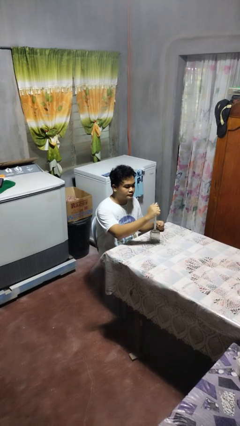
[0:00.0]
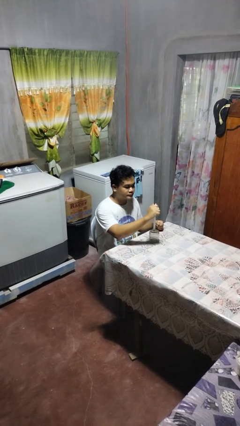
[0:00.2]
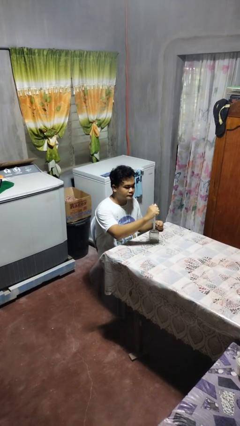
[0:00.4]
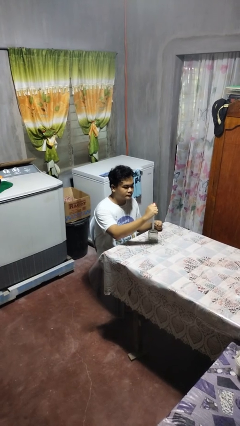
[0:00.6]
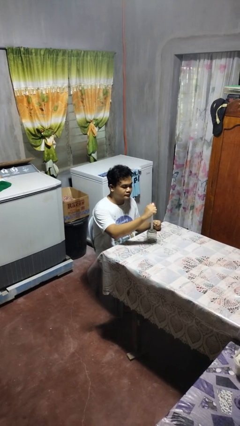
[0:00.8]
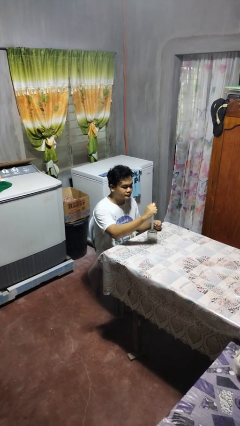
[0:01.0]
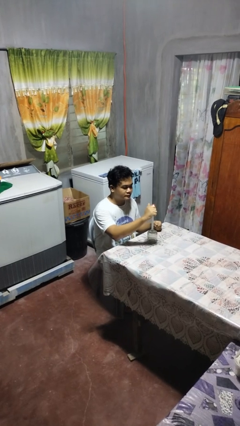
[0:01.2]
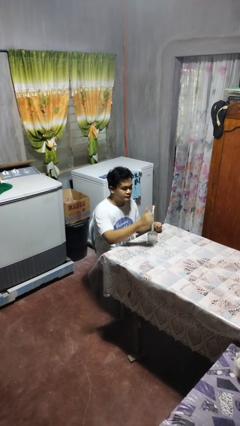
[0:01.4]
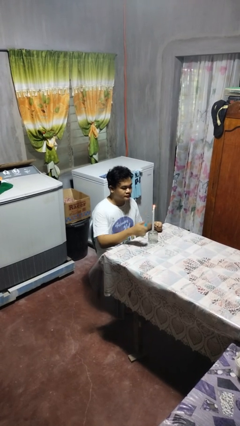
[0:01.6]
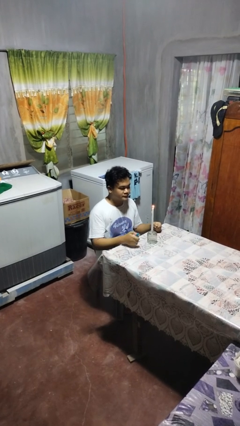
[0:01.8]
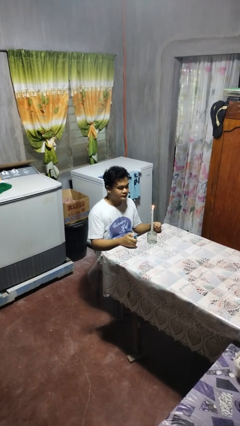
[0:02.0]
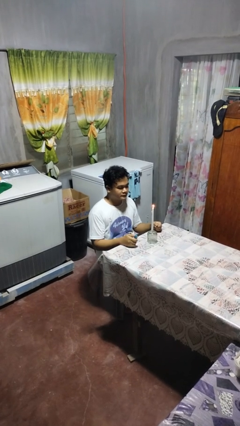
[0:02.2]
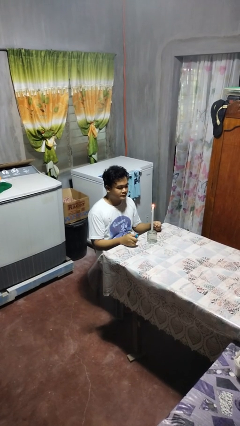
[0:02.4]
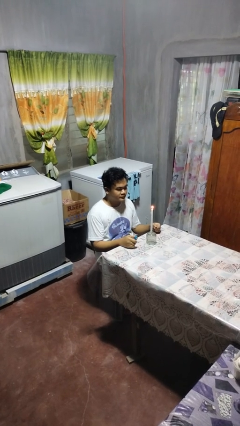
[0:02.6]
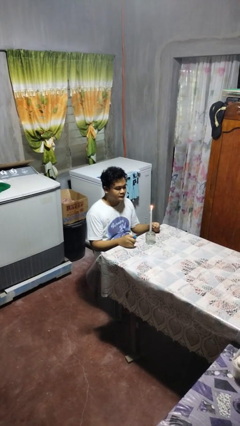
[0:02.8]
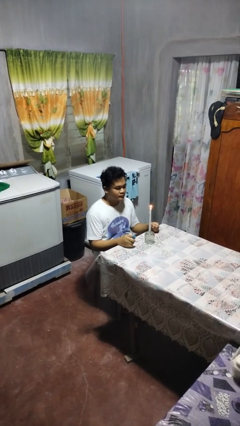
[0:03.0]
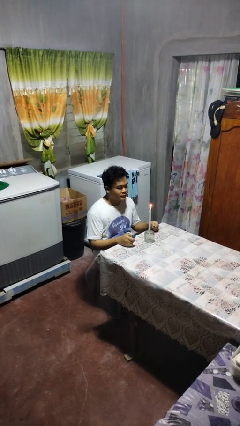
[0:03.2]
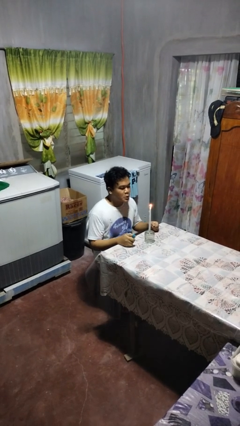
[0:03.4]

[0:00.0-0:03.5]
person lights candle

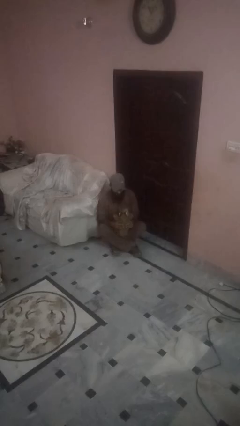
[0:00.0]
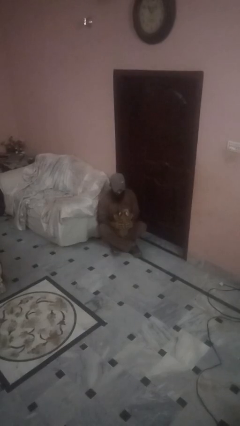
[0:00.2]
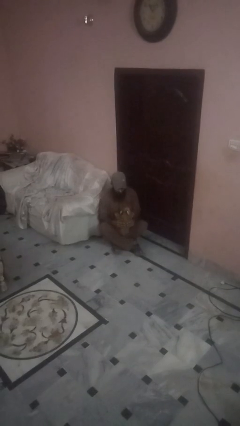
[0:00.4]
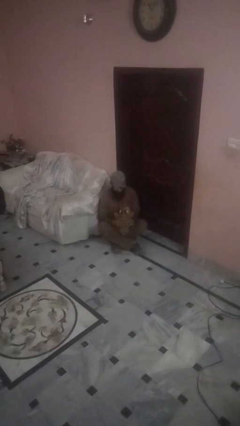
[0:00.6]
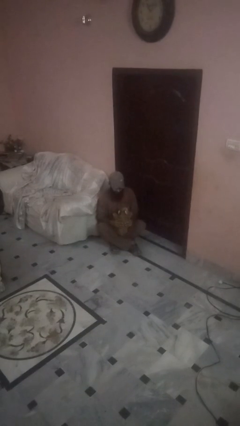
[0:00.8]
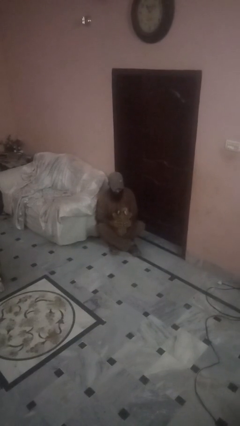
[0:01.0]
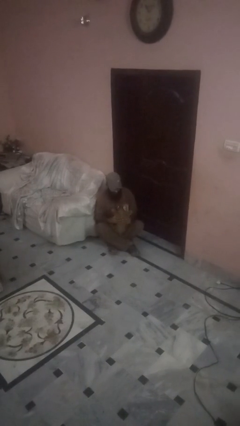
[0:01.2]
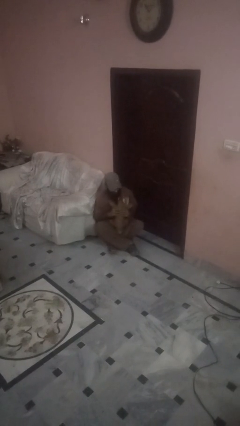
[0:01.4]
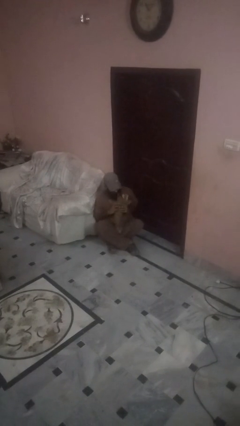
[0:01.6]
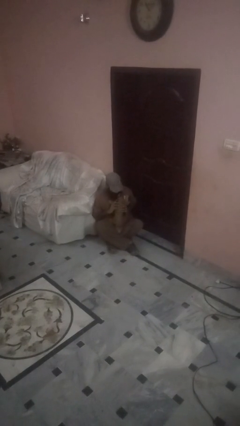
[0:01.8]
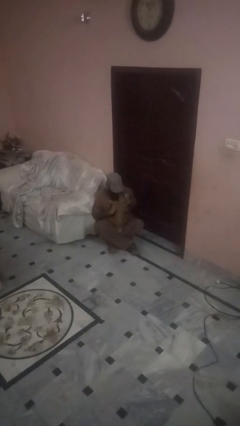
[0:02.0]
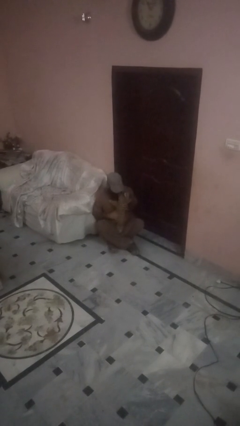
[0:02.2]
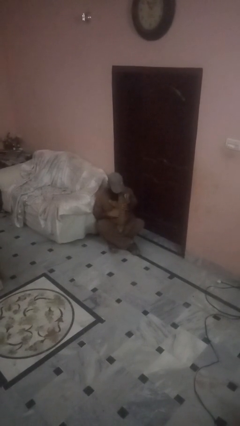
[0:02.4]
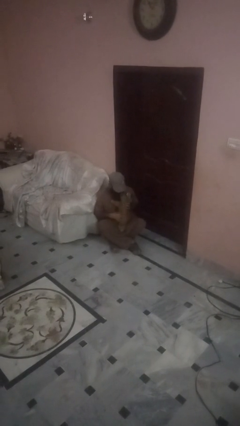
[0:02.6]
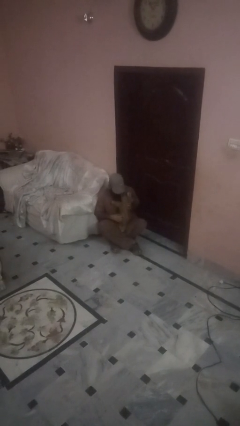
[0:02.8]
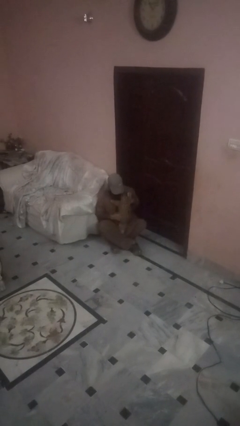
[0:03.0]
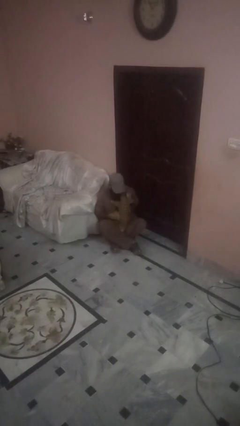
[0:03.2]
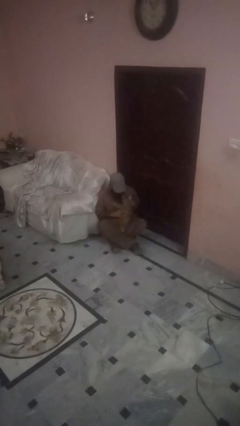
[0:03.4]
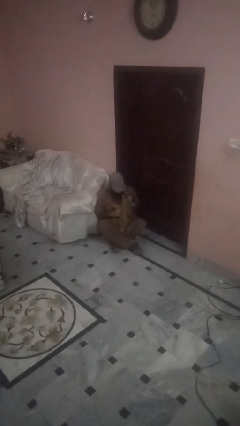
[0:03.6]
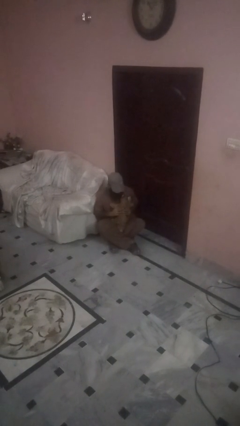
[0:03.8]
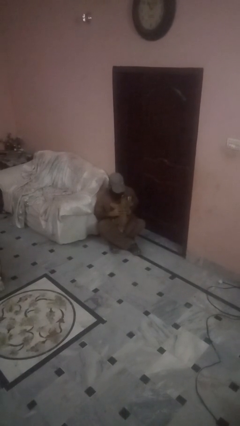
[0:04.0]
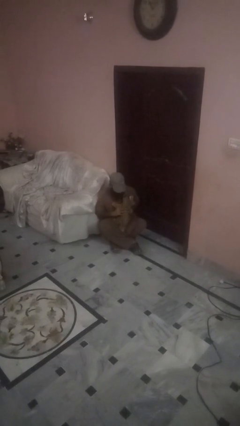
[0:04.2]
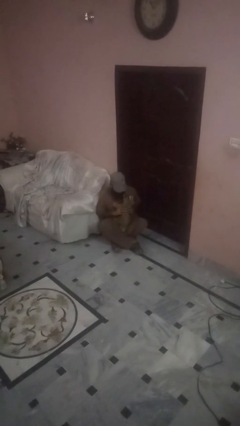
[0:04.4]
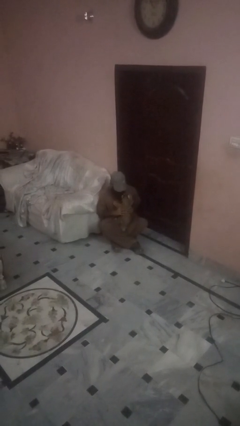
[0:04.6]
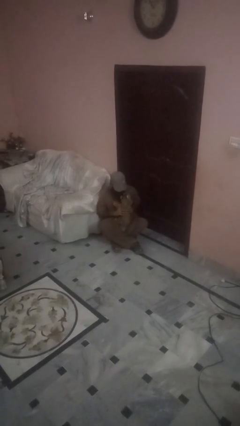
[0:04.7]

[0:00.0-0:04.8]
person hugs dog

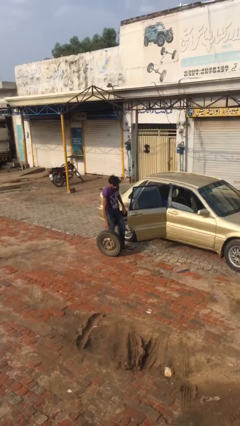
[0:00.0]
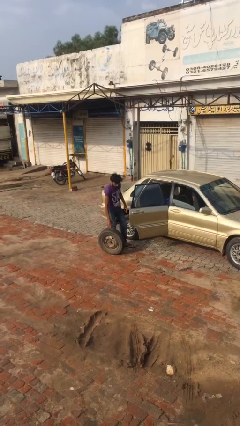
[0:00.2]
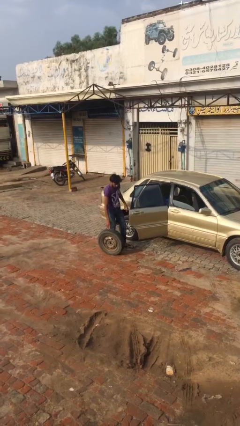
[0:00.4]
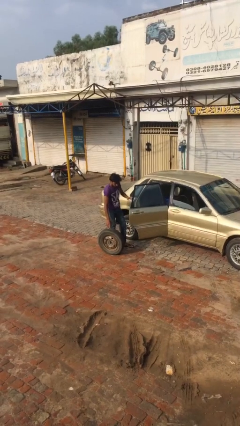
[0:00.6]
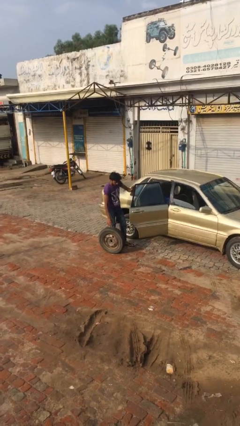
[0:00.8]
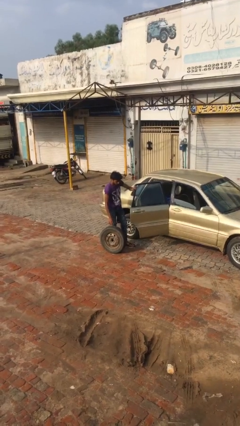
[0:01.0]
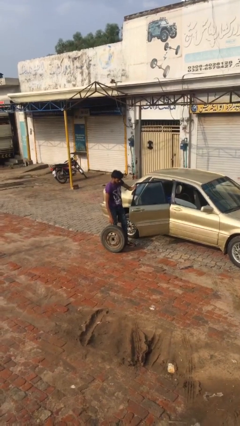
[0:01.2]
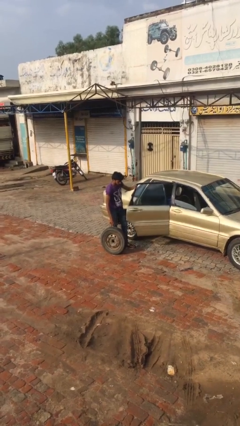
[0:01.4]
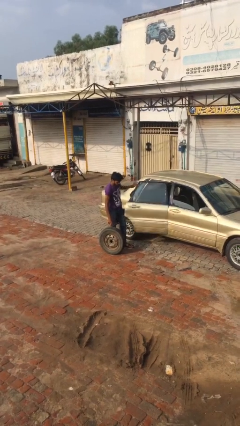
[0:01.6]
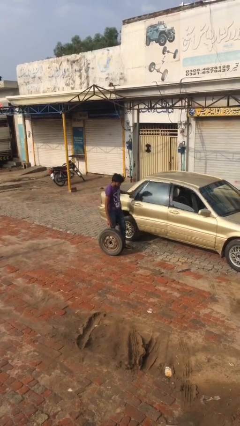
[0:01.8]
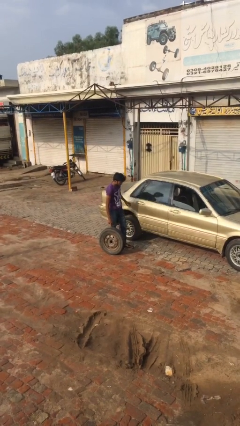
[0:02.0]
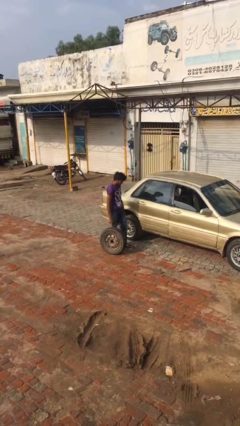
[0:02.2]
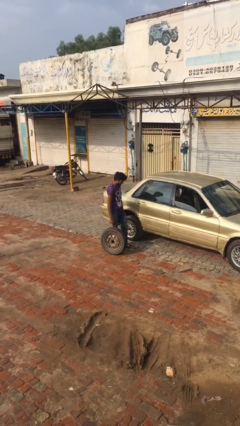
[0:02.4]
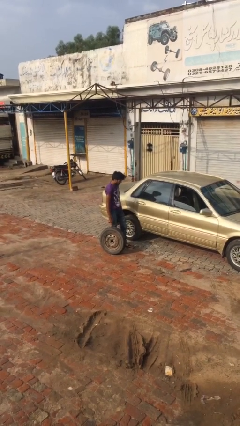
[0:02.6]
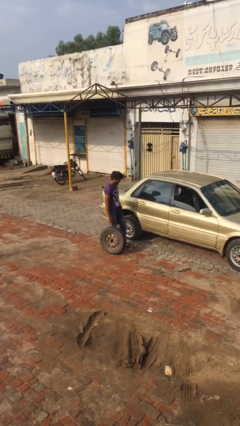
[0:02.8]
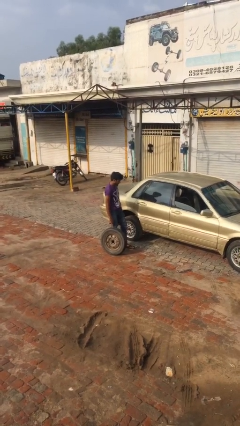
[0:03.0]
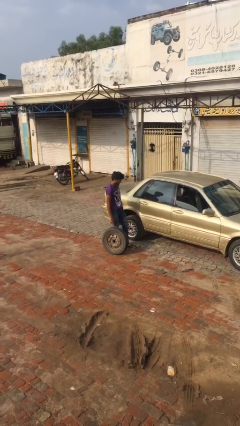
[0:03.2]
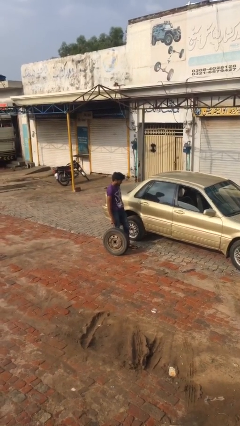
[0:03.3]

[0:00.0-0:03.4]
person closes car door

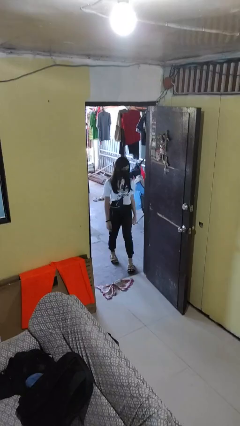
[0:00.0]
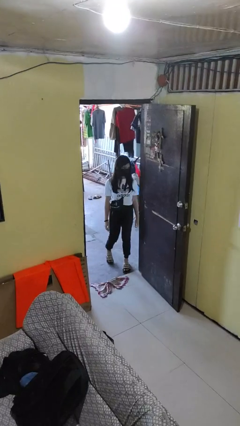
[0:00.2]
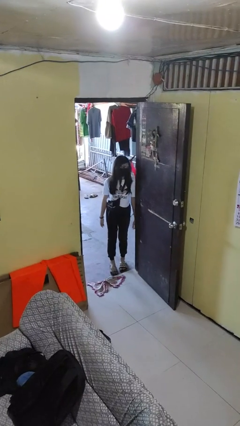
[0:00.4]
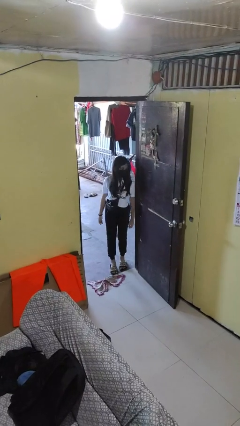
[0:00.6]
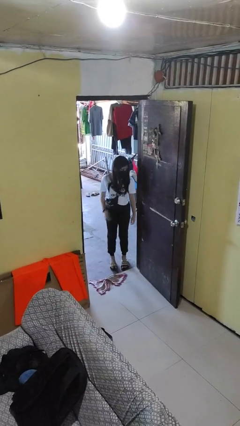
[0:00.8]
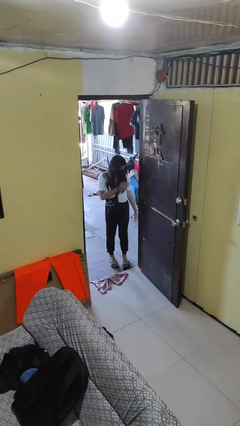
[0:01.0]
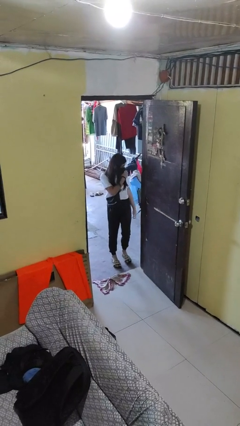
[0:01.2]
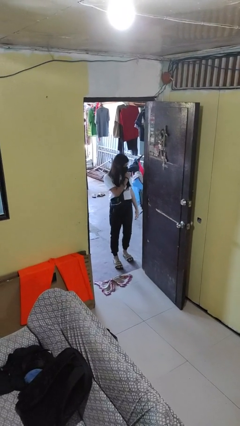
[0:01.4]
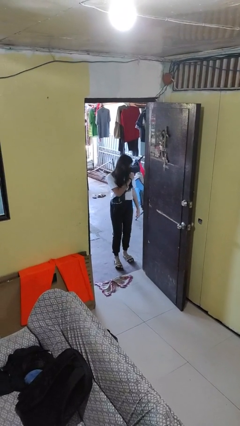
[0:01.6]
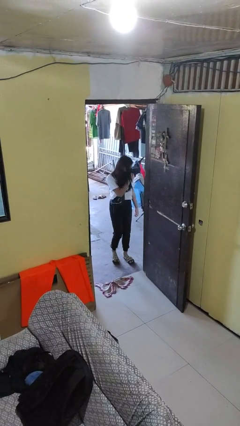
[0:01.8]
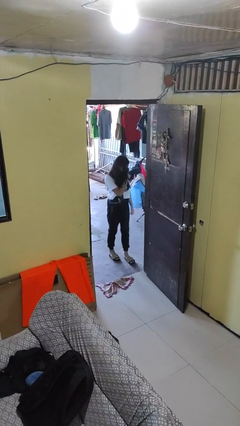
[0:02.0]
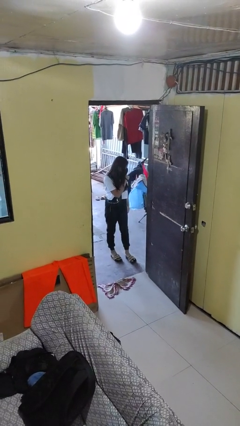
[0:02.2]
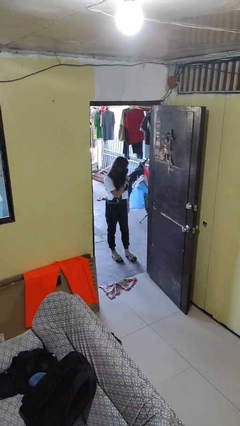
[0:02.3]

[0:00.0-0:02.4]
person bumps into wall

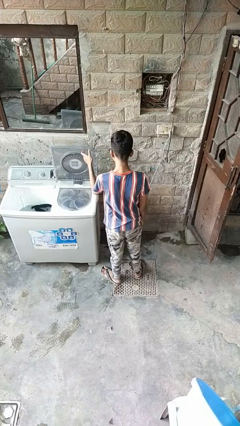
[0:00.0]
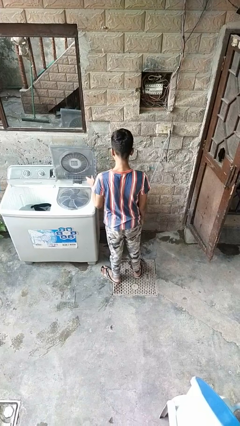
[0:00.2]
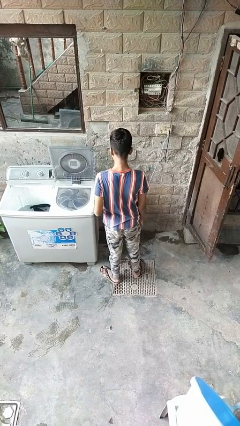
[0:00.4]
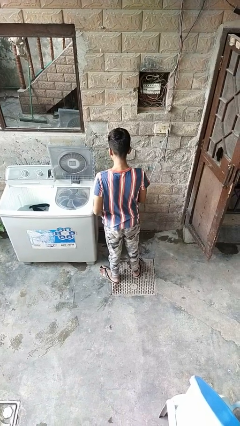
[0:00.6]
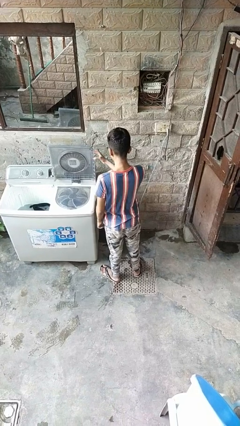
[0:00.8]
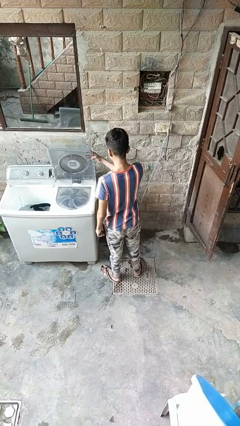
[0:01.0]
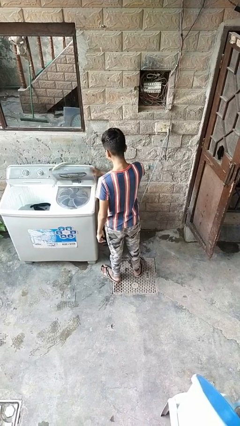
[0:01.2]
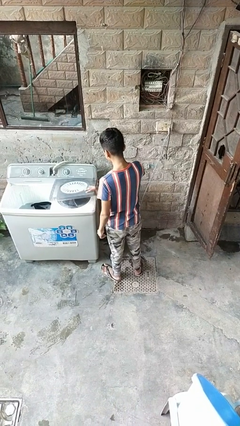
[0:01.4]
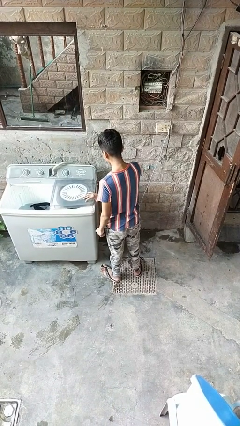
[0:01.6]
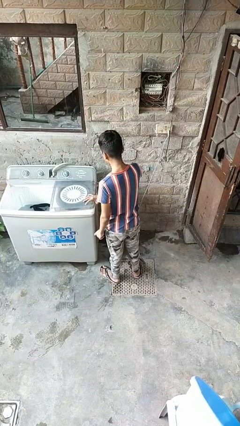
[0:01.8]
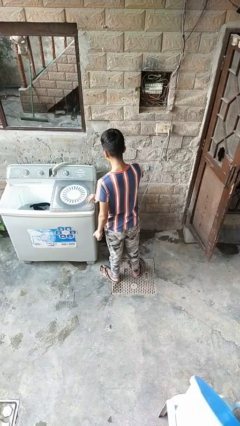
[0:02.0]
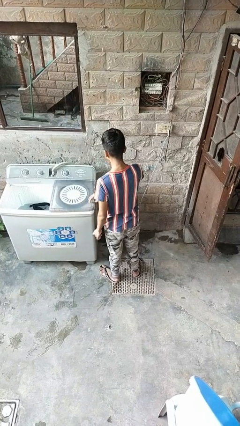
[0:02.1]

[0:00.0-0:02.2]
person turns off faucet

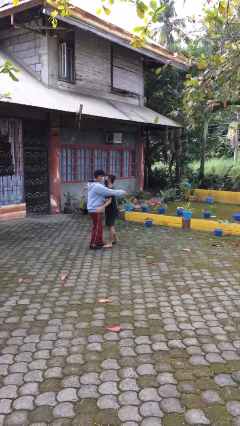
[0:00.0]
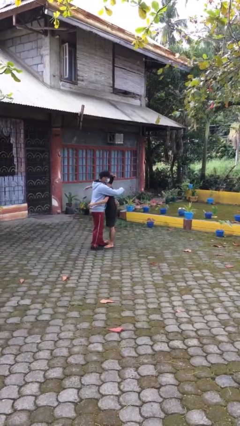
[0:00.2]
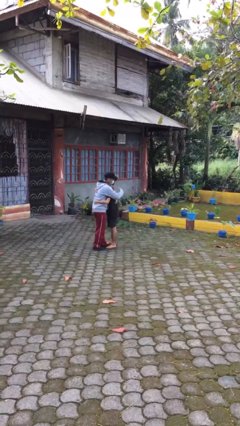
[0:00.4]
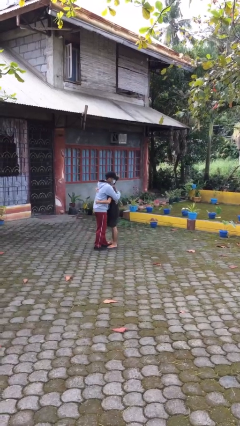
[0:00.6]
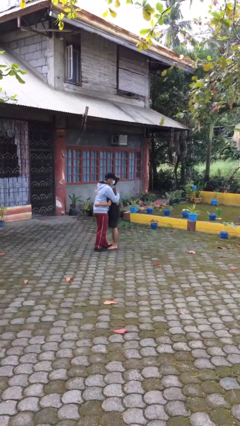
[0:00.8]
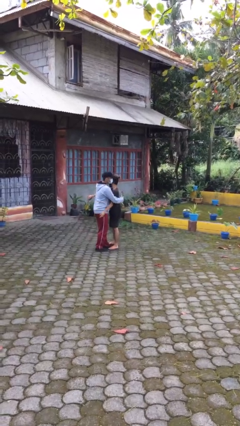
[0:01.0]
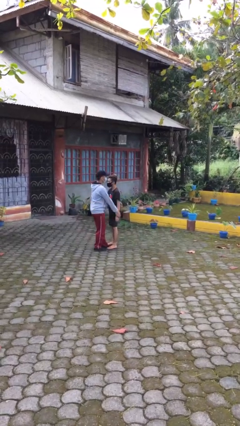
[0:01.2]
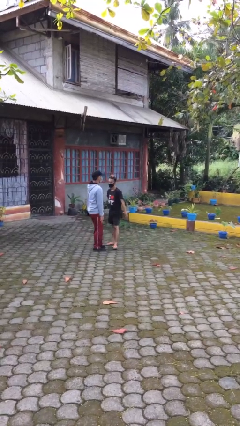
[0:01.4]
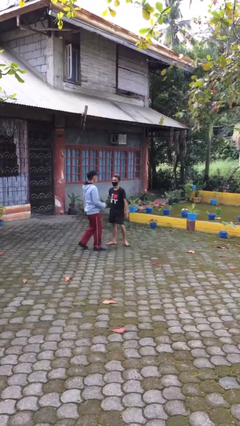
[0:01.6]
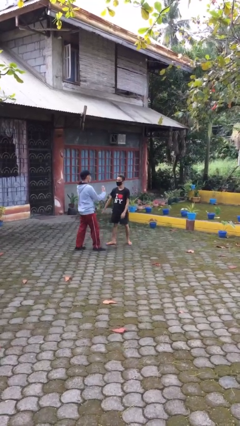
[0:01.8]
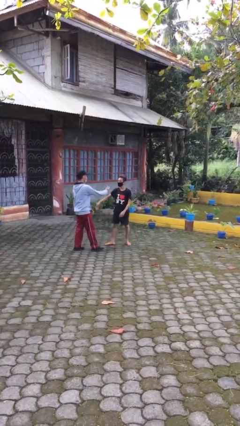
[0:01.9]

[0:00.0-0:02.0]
person embraces person
